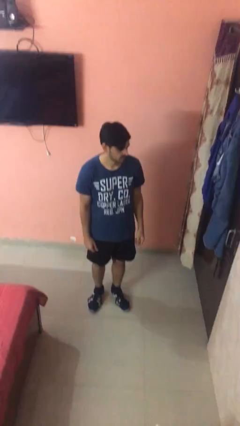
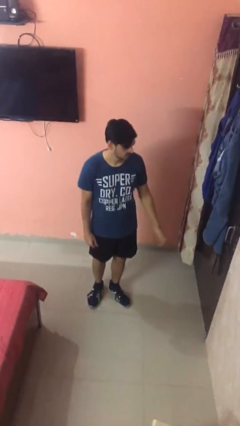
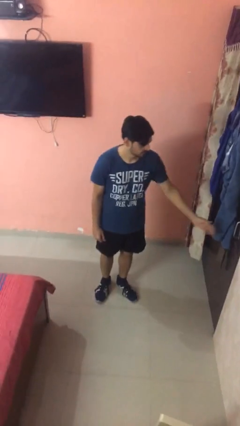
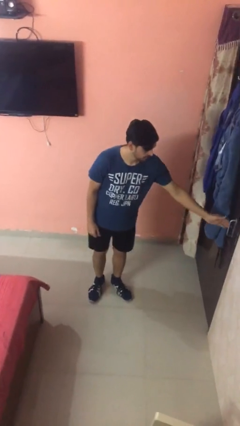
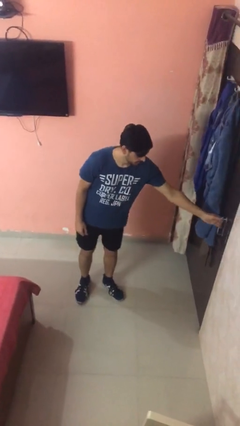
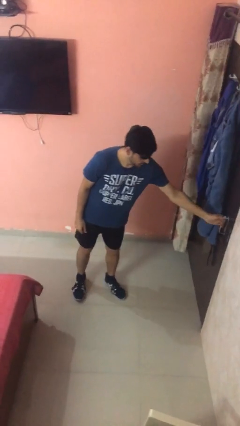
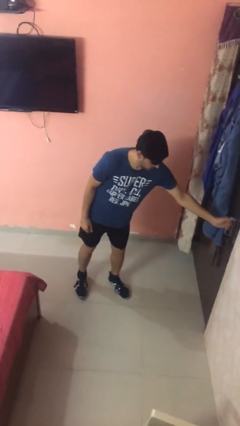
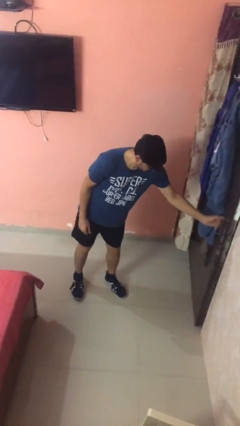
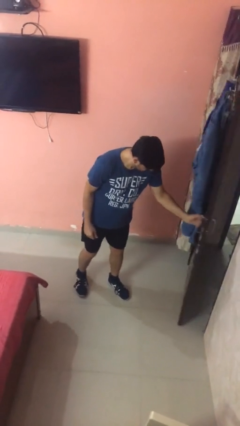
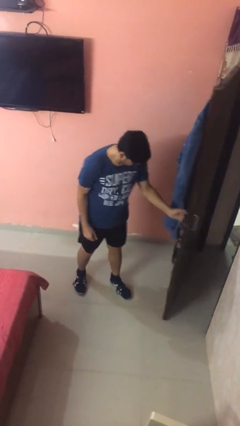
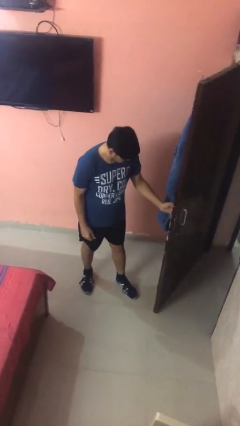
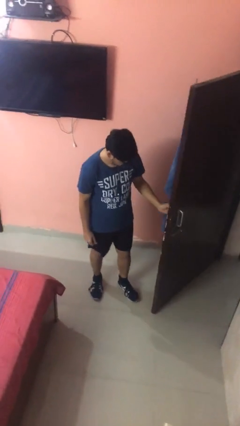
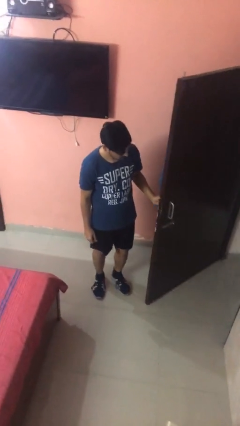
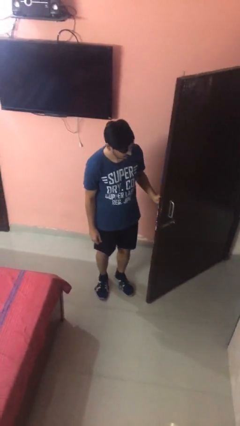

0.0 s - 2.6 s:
person opens facility door

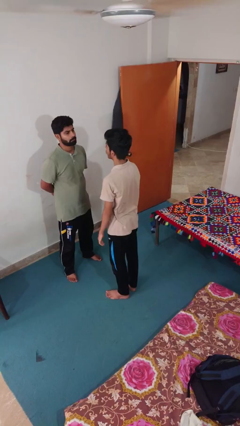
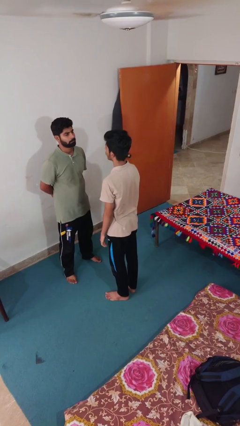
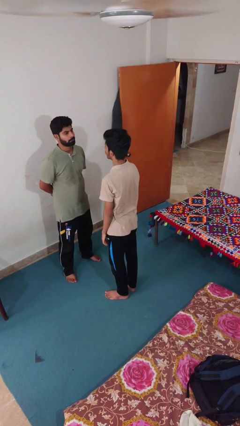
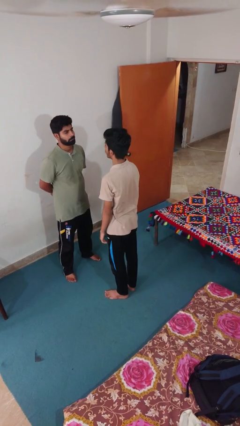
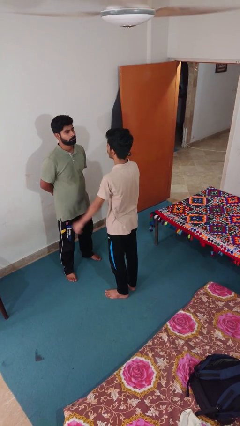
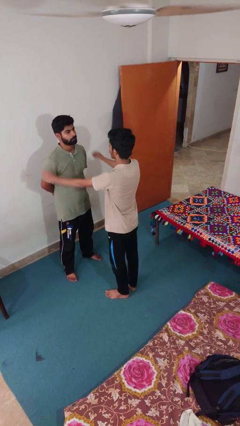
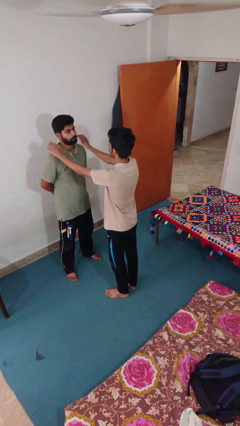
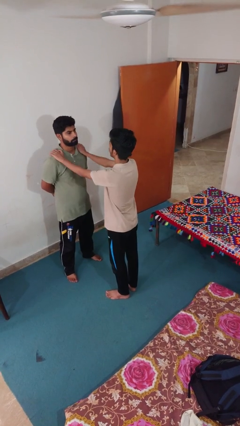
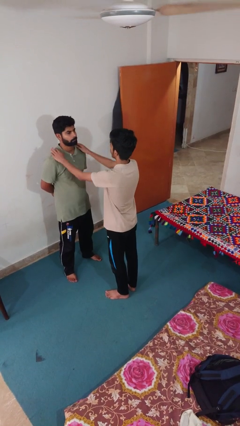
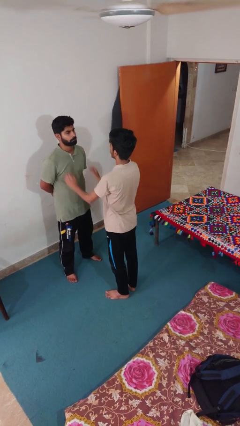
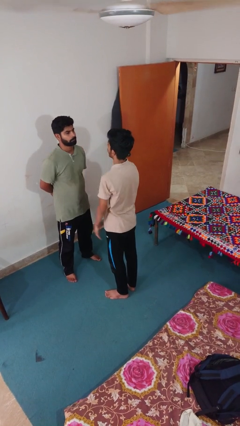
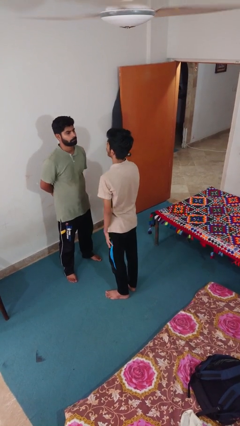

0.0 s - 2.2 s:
person pounds shoulders of person

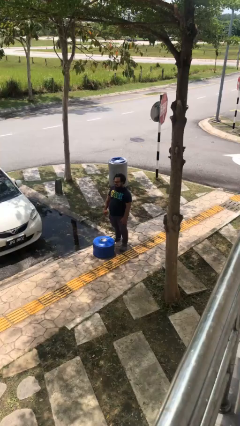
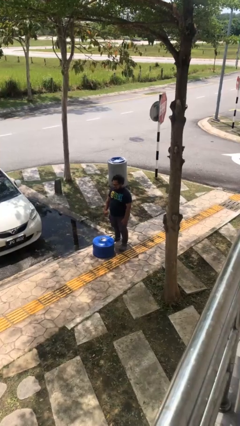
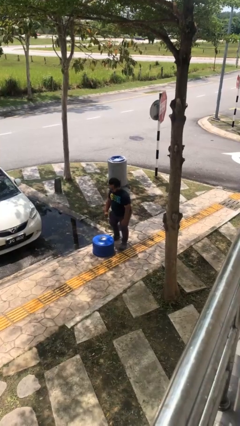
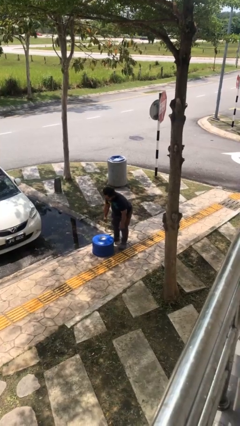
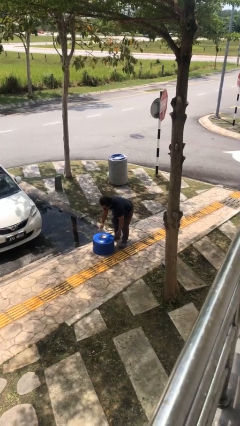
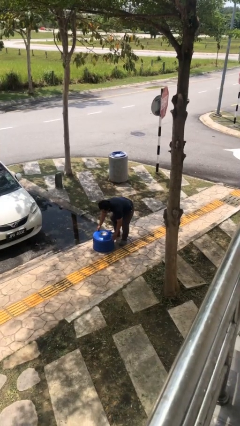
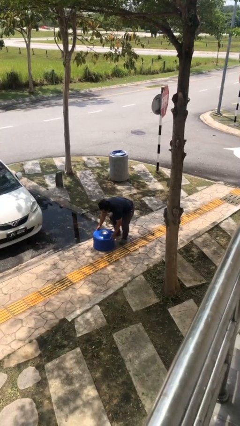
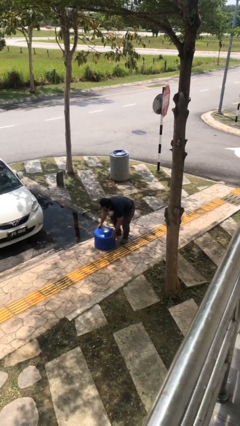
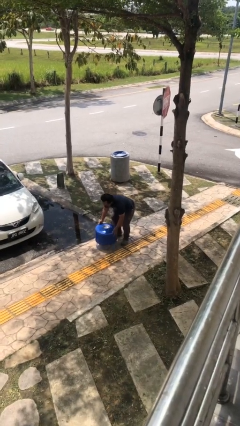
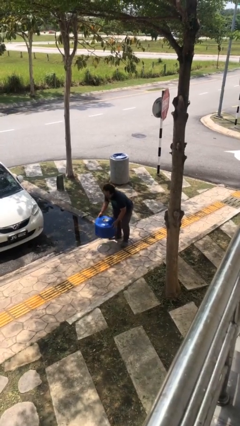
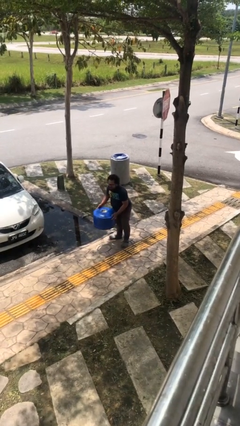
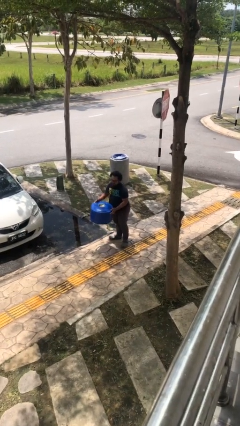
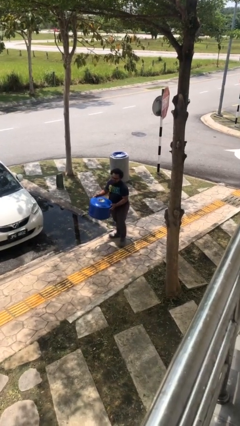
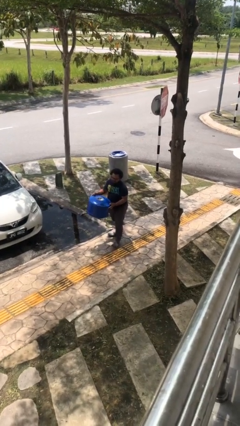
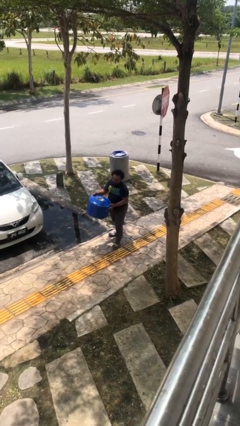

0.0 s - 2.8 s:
person picks up object from floor

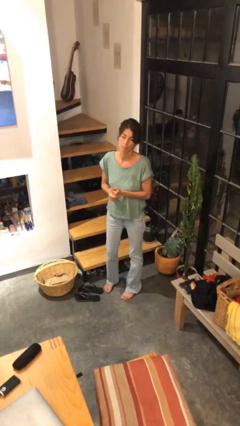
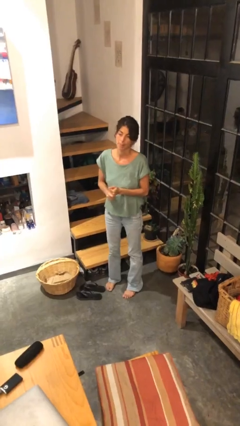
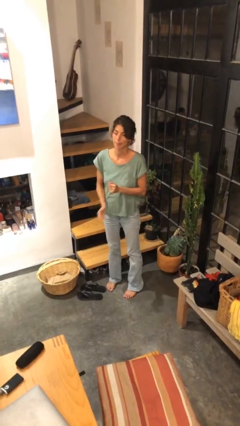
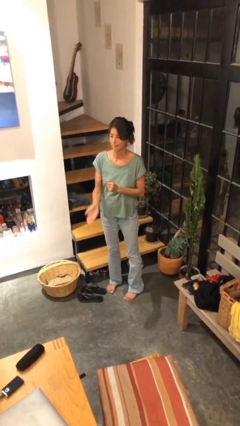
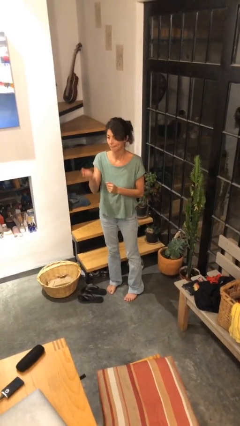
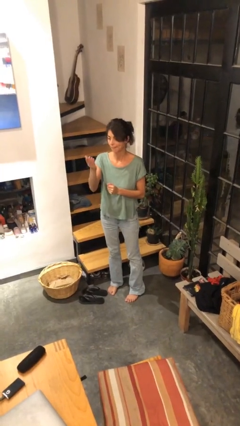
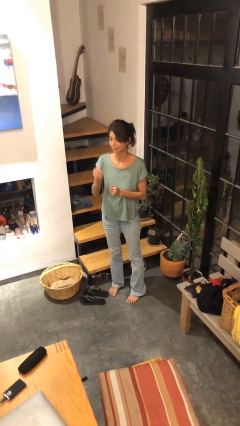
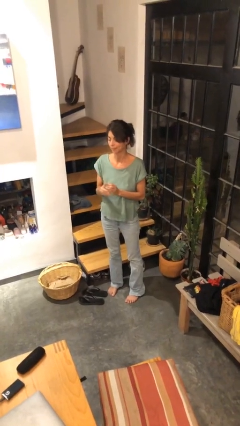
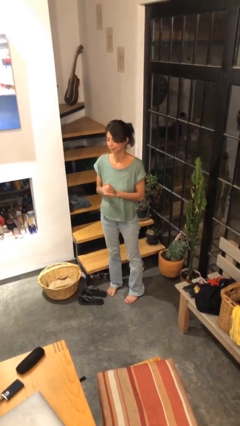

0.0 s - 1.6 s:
person gestures swipe up

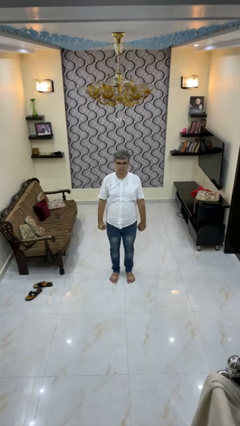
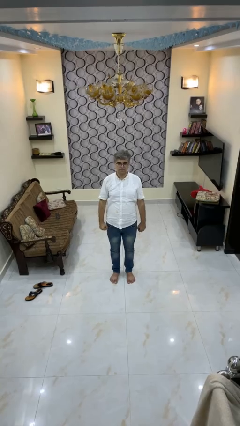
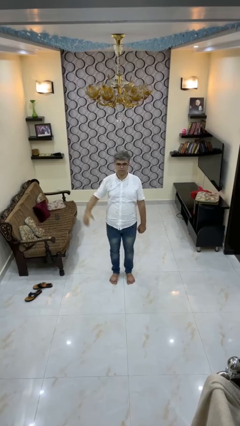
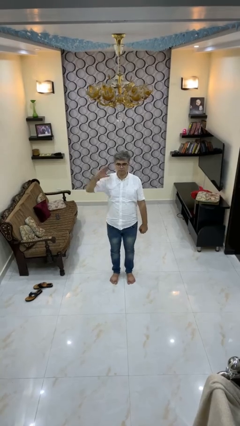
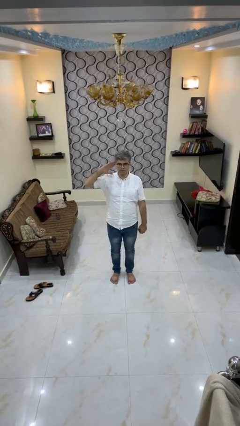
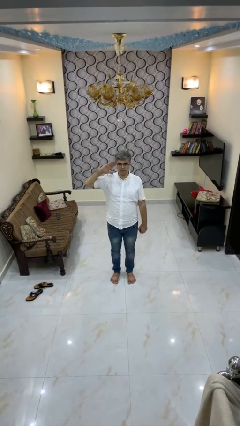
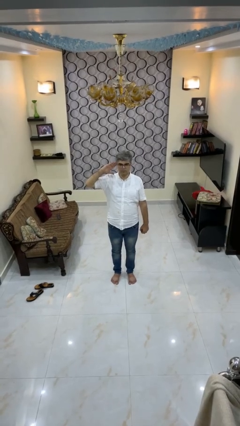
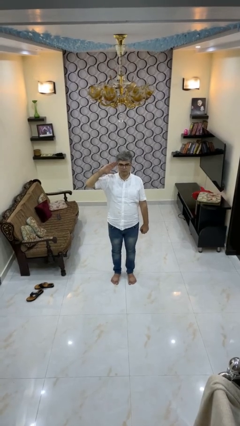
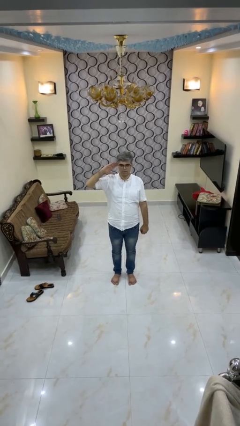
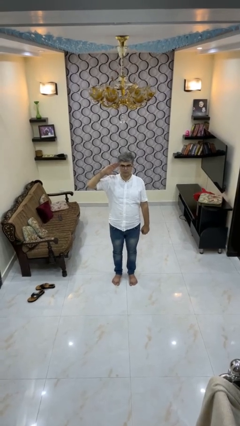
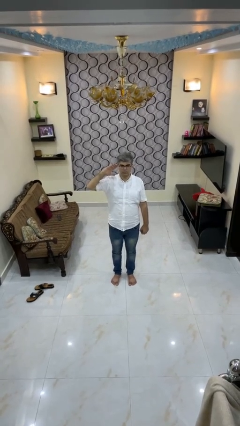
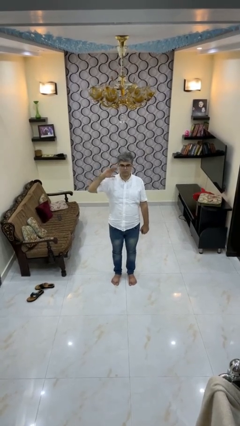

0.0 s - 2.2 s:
person salutes

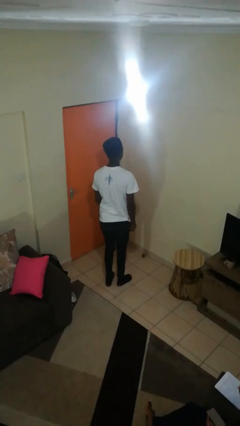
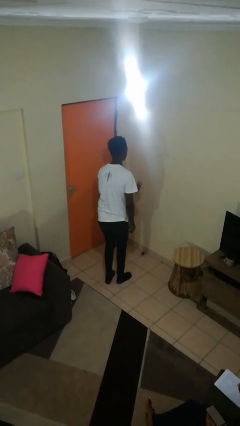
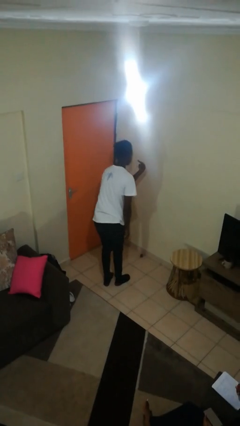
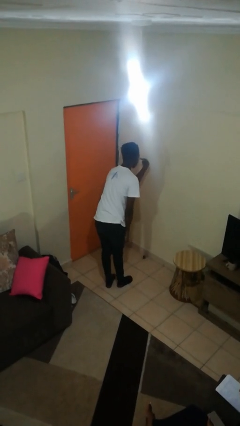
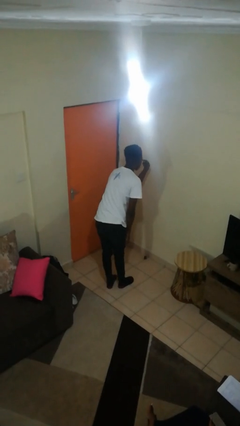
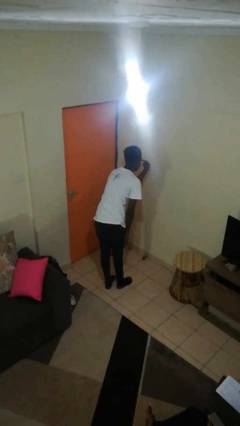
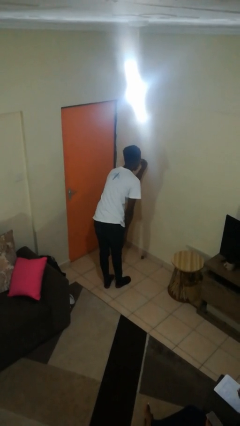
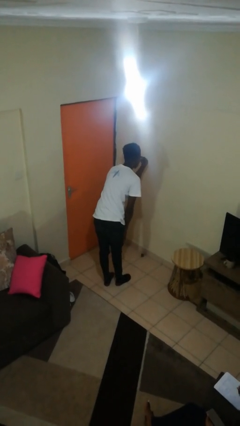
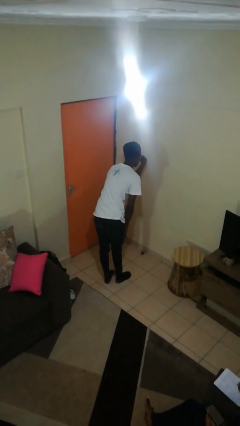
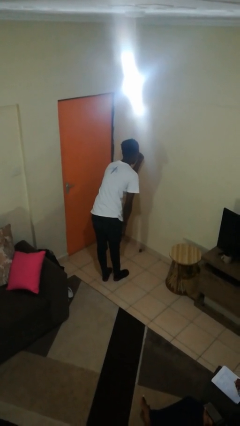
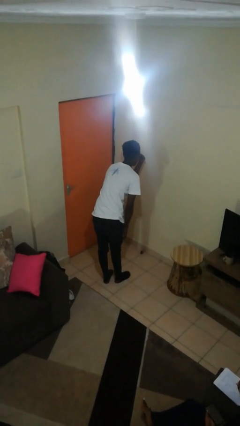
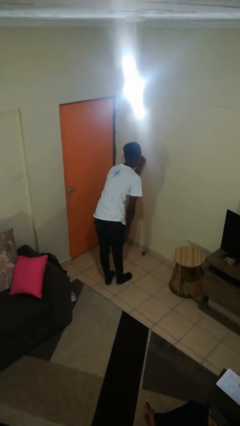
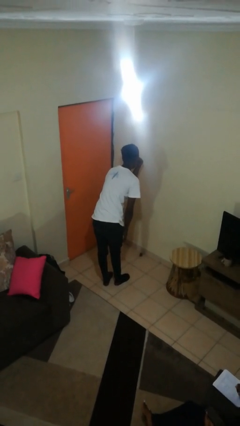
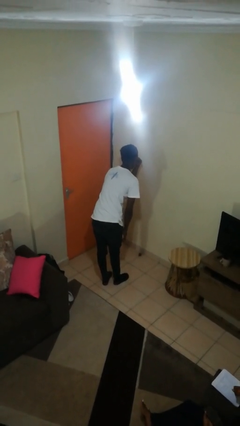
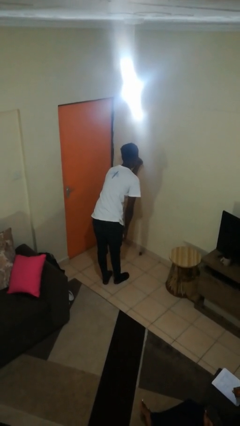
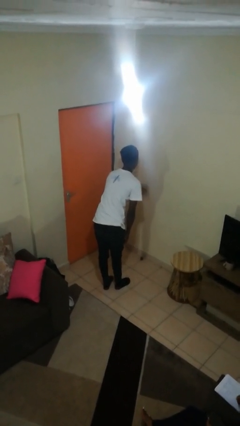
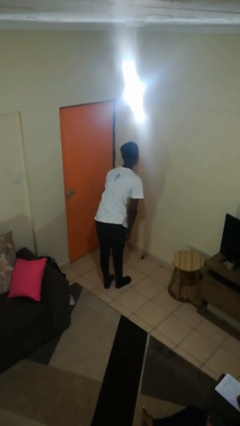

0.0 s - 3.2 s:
person gestures watch closely

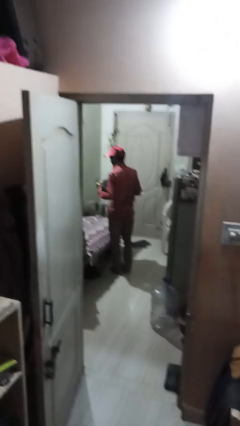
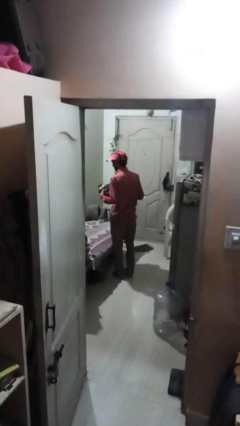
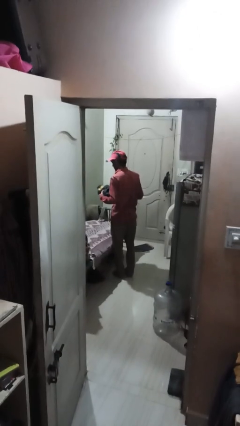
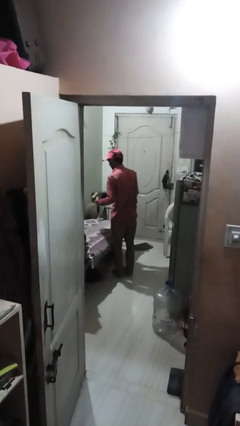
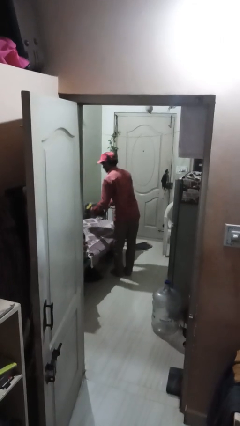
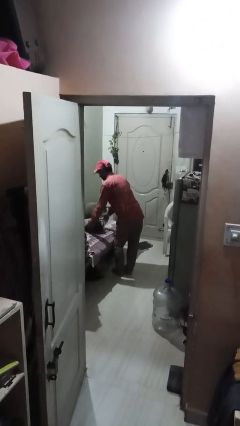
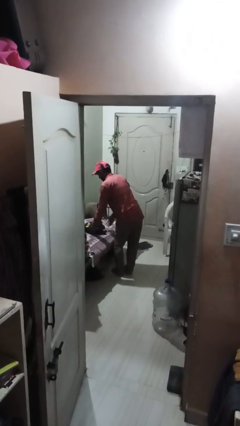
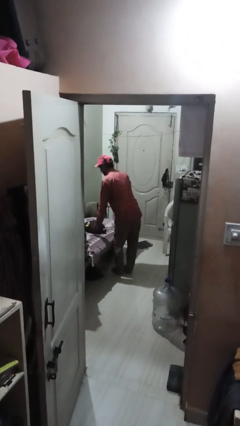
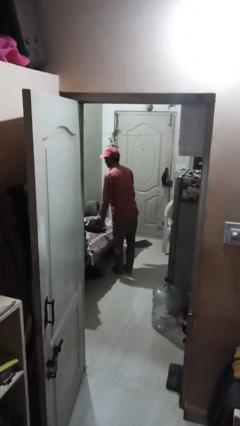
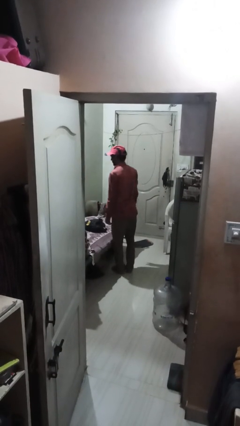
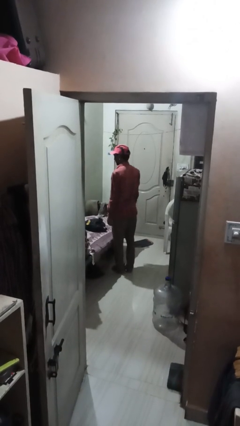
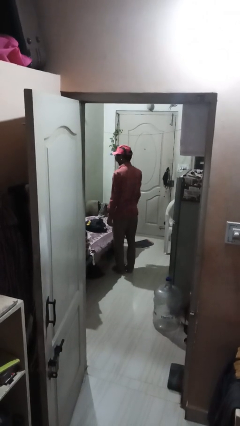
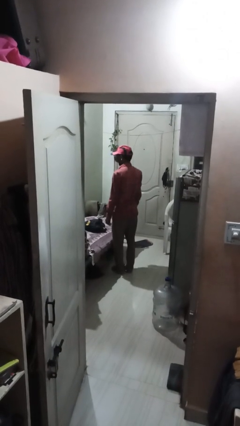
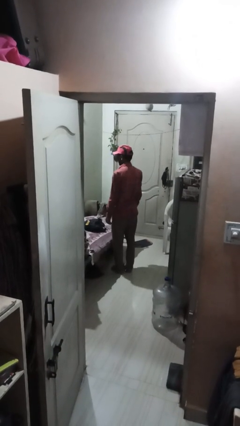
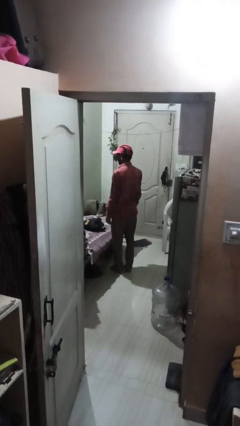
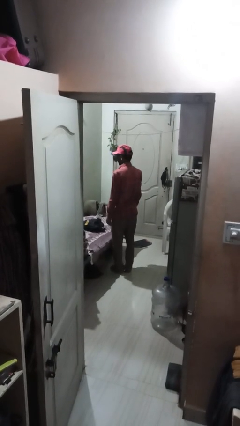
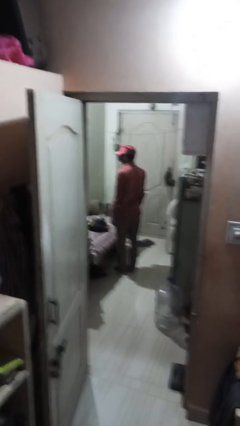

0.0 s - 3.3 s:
person puts down object on bed
